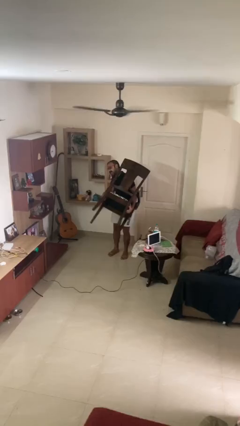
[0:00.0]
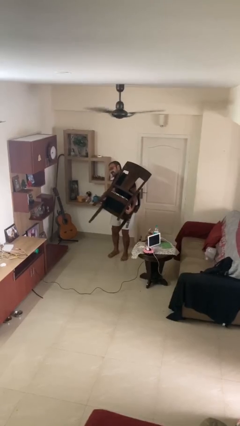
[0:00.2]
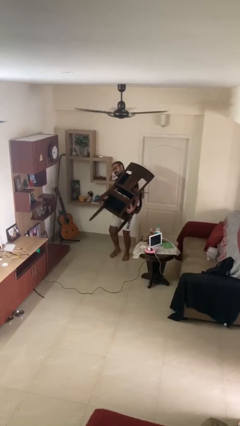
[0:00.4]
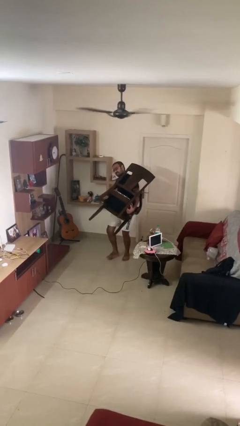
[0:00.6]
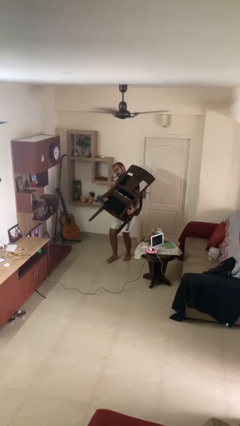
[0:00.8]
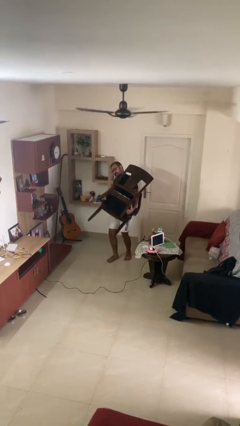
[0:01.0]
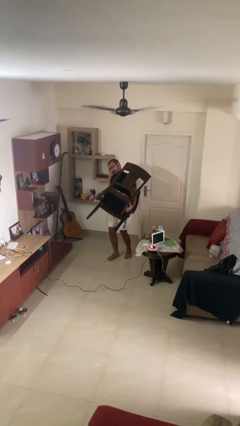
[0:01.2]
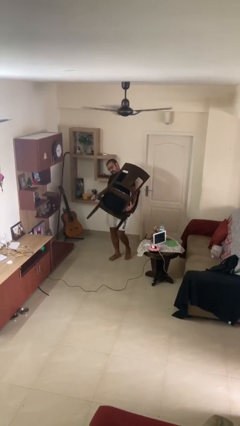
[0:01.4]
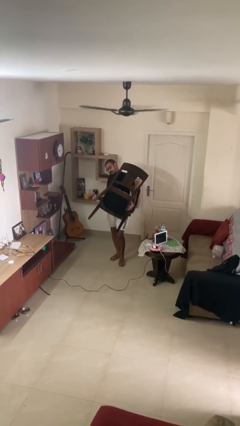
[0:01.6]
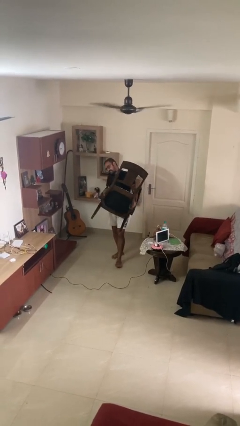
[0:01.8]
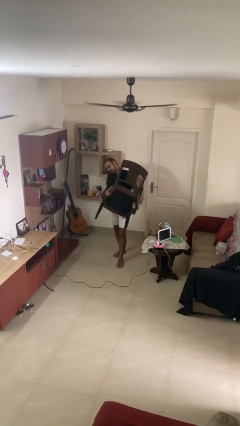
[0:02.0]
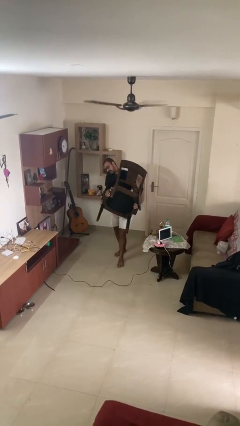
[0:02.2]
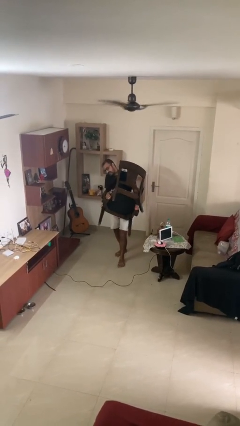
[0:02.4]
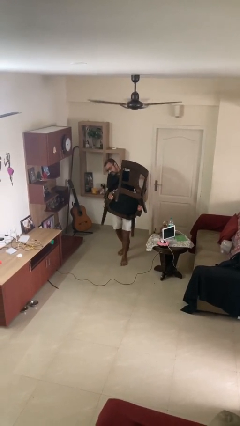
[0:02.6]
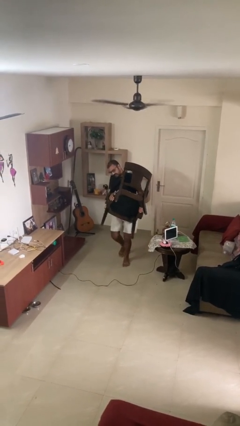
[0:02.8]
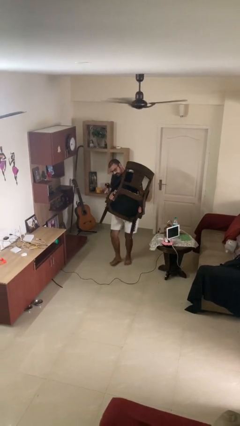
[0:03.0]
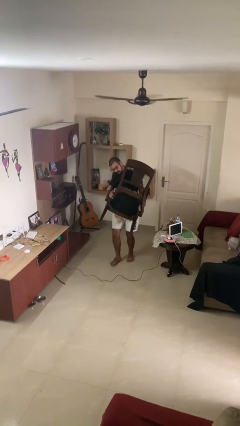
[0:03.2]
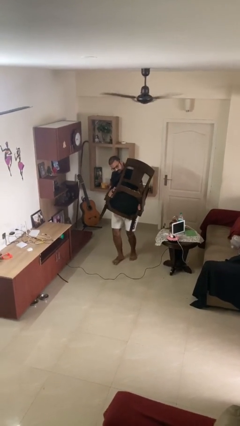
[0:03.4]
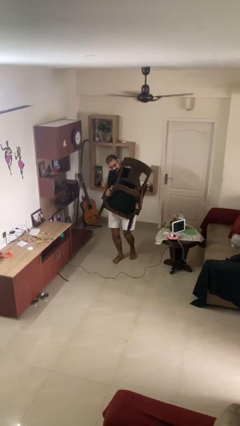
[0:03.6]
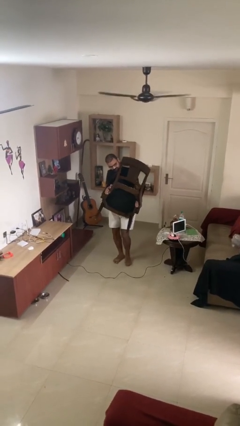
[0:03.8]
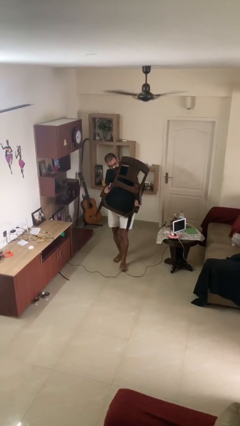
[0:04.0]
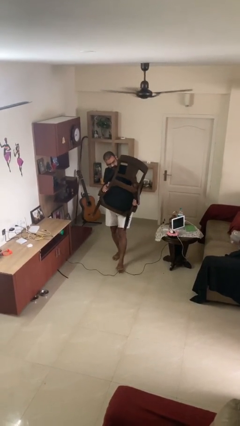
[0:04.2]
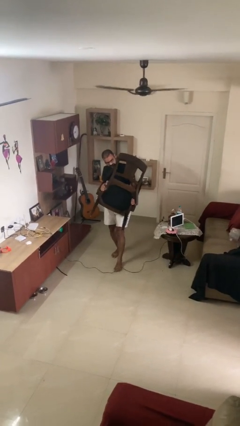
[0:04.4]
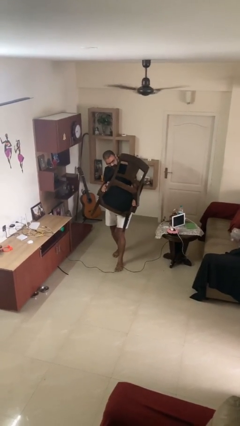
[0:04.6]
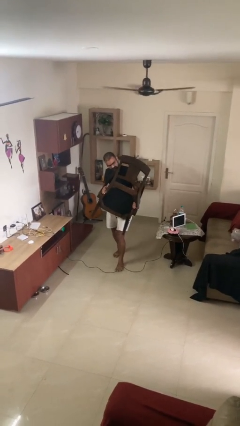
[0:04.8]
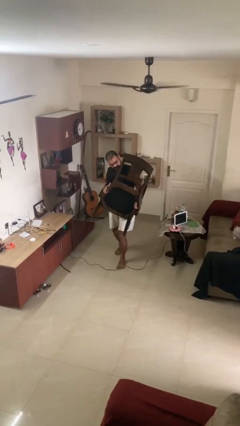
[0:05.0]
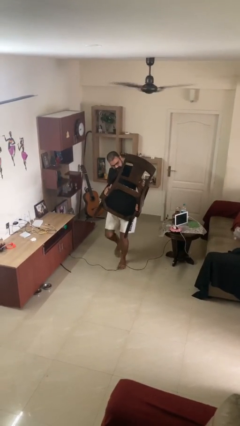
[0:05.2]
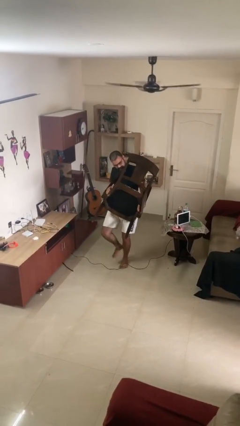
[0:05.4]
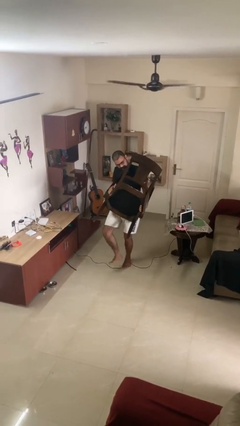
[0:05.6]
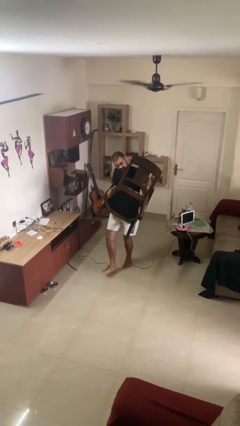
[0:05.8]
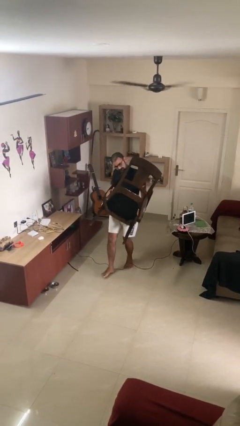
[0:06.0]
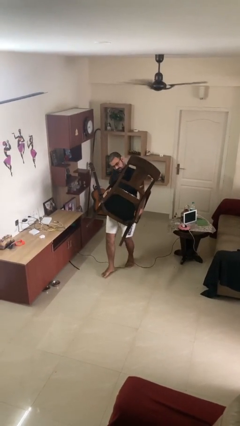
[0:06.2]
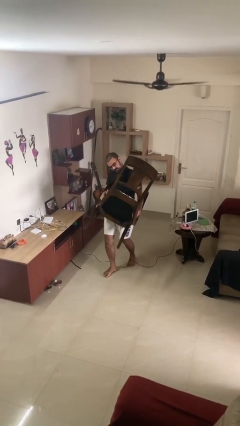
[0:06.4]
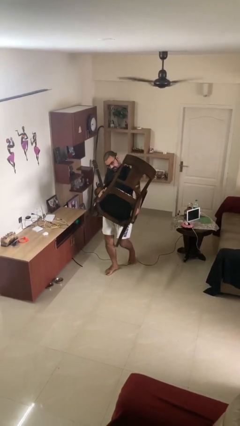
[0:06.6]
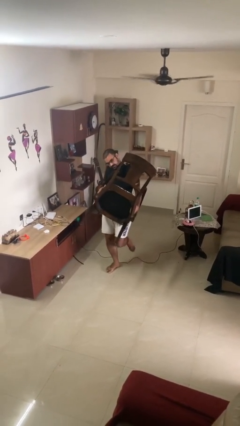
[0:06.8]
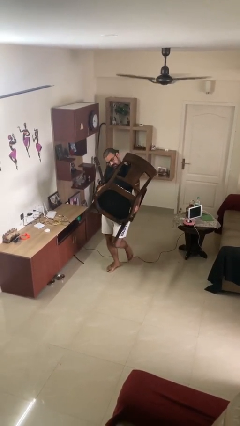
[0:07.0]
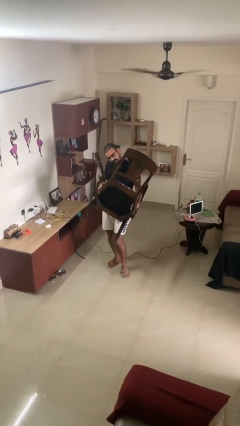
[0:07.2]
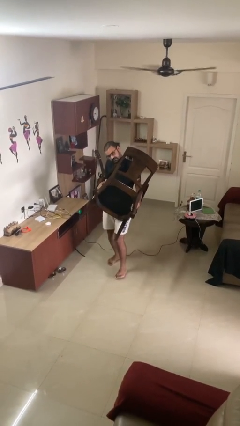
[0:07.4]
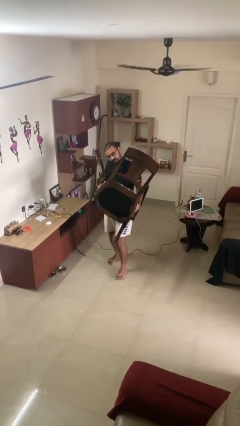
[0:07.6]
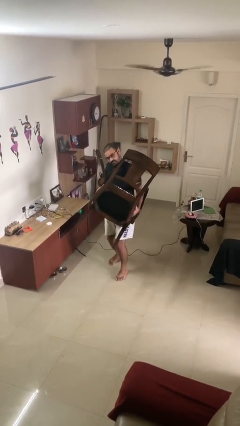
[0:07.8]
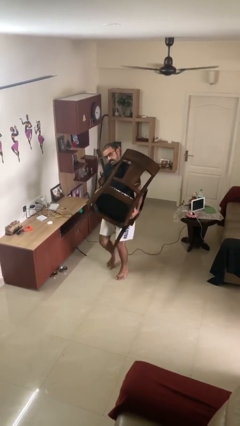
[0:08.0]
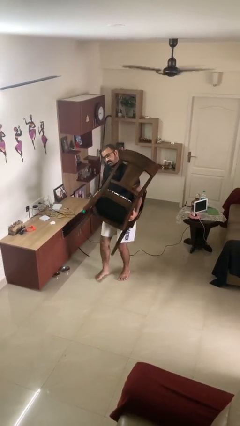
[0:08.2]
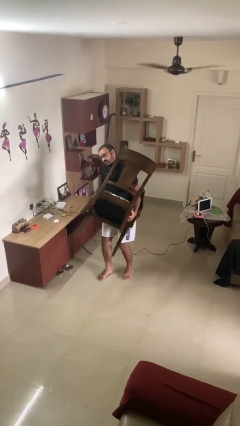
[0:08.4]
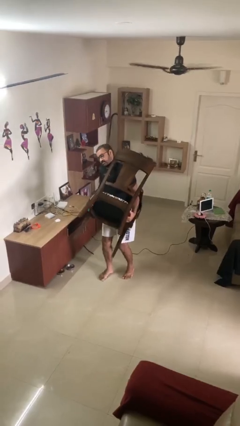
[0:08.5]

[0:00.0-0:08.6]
person carries heavy object

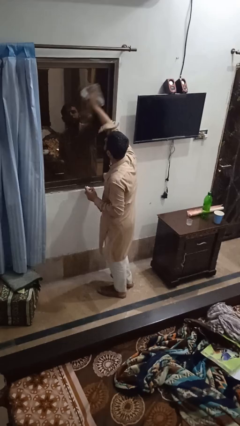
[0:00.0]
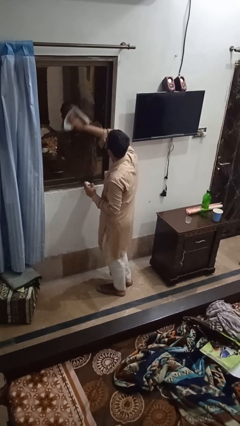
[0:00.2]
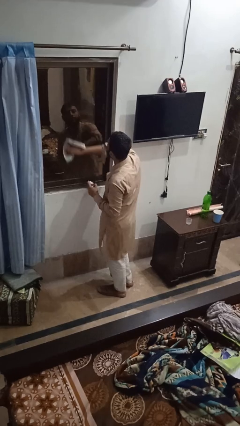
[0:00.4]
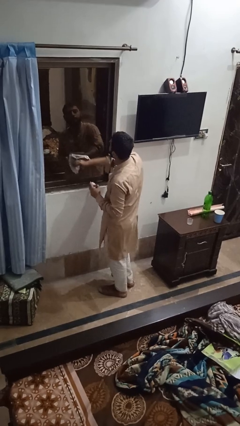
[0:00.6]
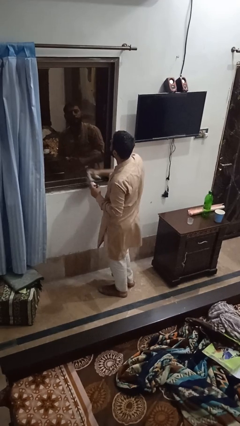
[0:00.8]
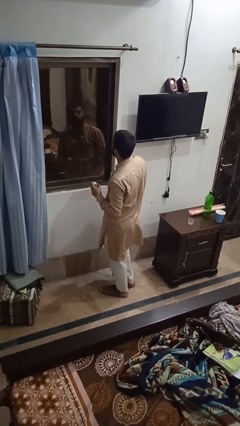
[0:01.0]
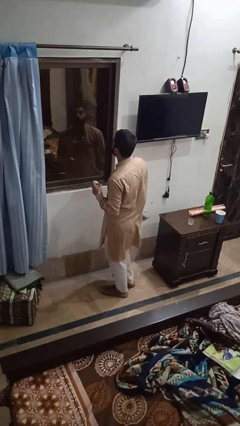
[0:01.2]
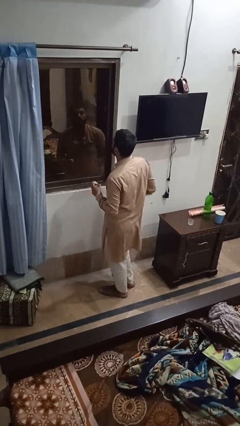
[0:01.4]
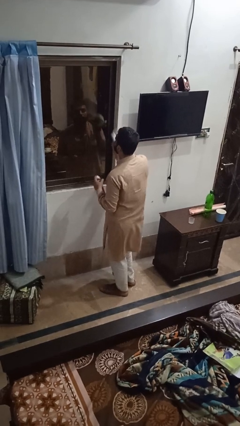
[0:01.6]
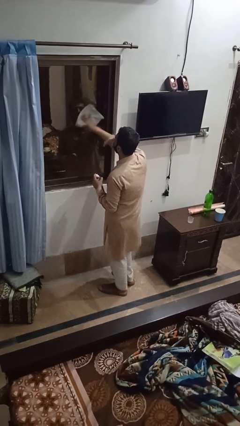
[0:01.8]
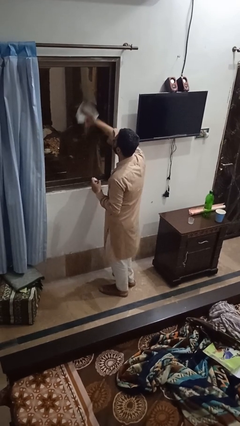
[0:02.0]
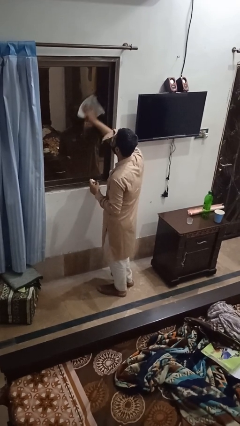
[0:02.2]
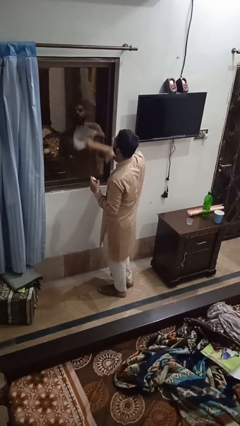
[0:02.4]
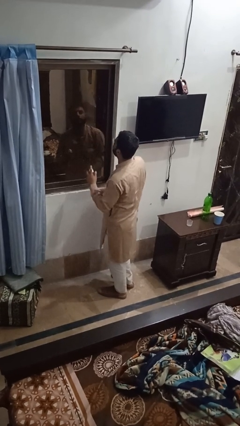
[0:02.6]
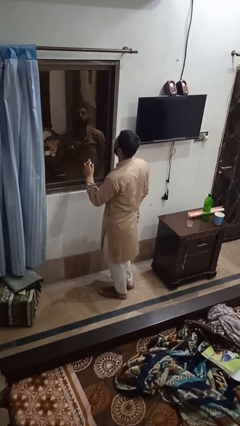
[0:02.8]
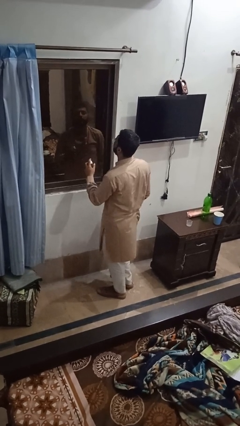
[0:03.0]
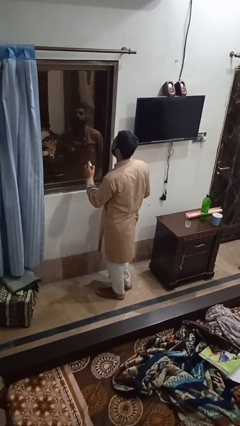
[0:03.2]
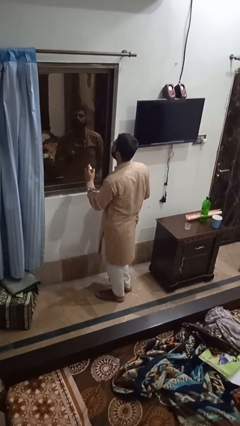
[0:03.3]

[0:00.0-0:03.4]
person washes window

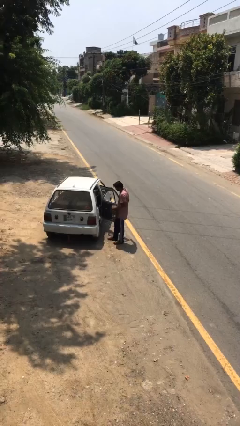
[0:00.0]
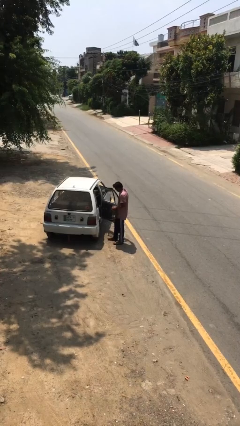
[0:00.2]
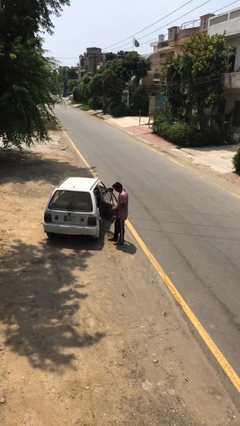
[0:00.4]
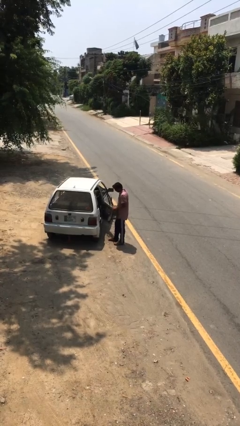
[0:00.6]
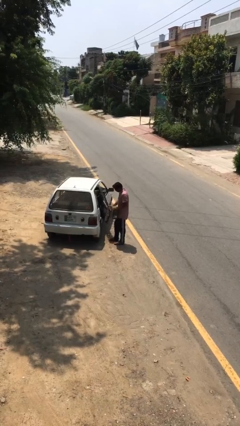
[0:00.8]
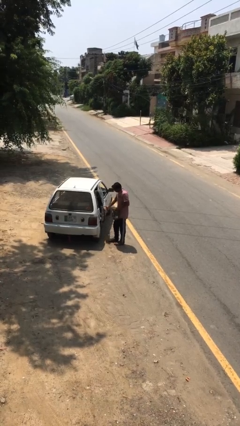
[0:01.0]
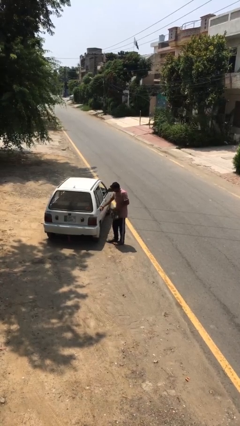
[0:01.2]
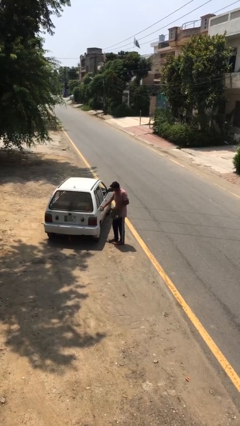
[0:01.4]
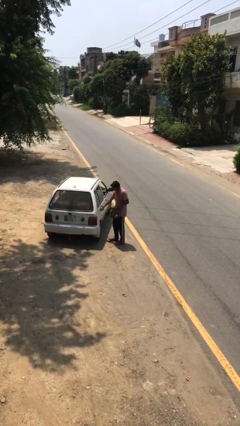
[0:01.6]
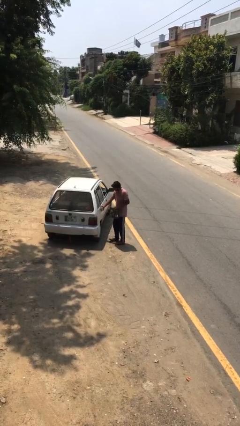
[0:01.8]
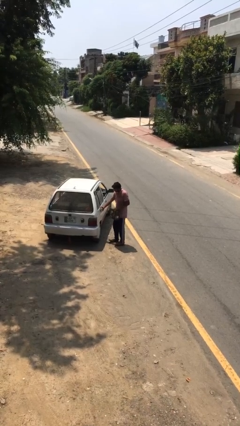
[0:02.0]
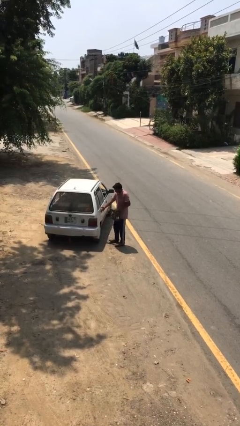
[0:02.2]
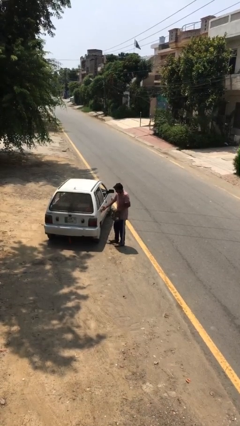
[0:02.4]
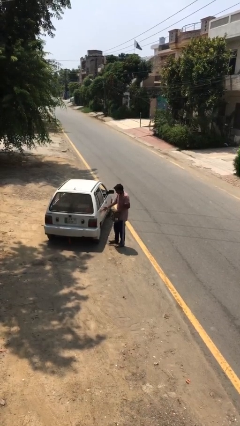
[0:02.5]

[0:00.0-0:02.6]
person closes car door

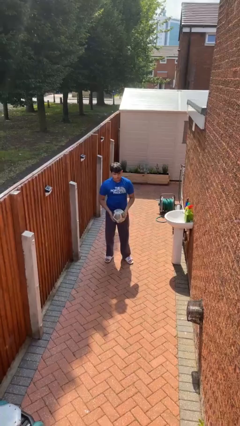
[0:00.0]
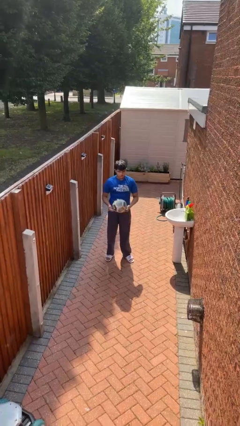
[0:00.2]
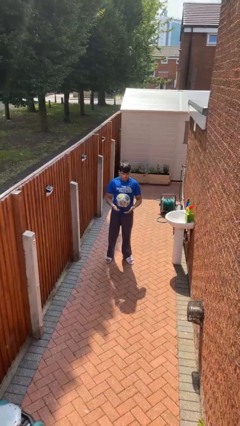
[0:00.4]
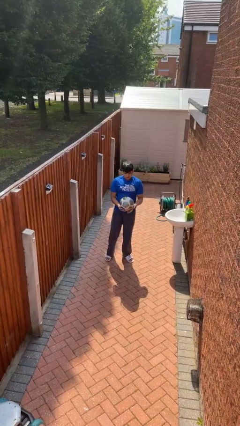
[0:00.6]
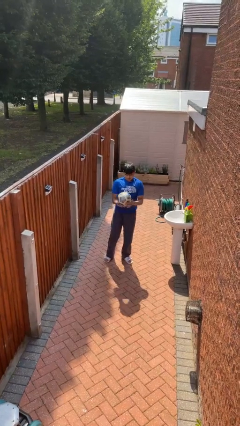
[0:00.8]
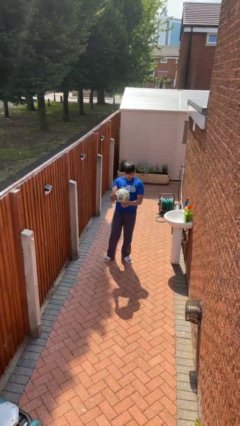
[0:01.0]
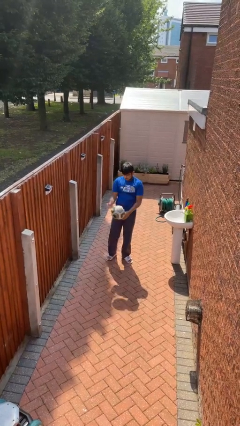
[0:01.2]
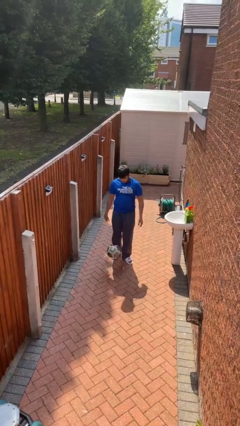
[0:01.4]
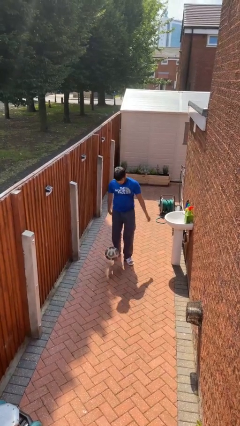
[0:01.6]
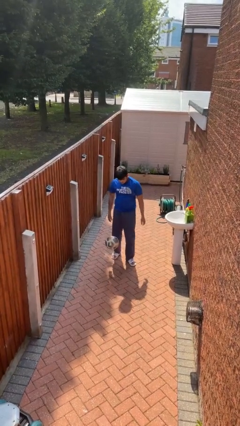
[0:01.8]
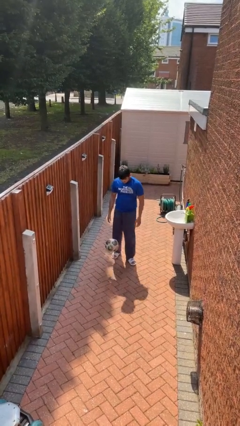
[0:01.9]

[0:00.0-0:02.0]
person drops object

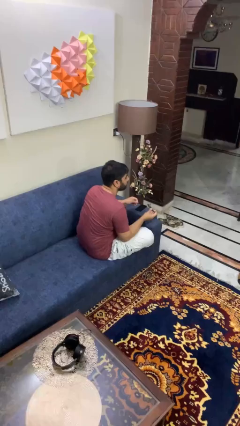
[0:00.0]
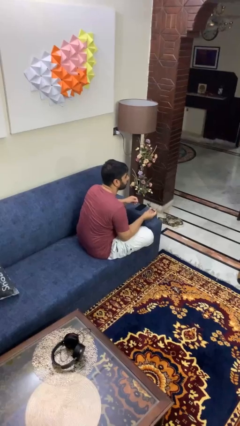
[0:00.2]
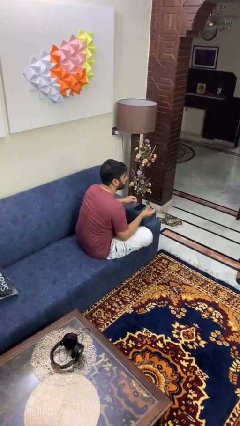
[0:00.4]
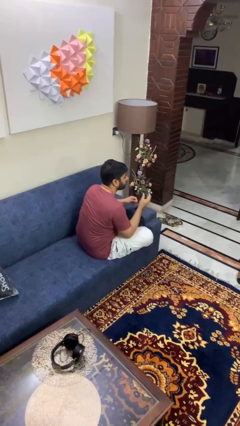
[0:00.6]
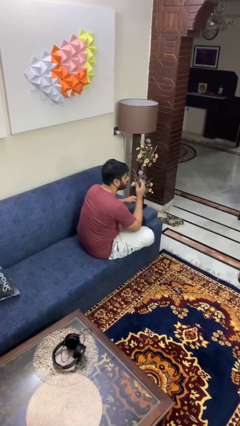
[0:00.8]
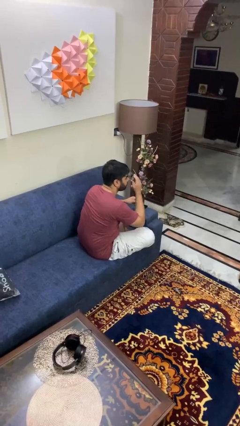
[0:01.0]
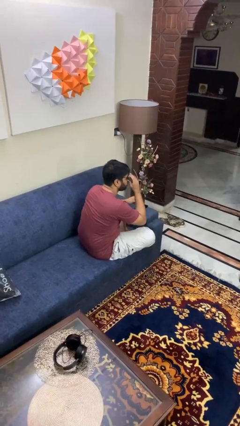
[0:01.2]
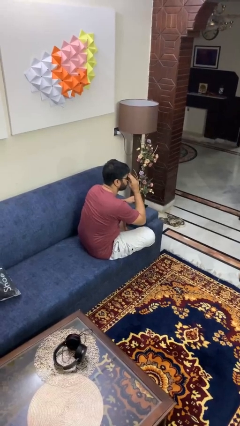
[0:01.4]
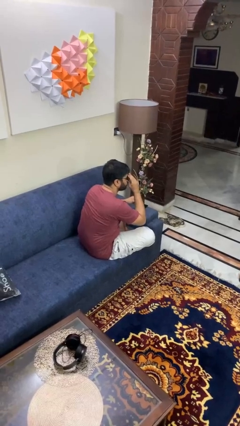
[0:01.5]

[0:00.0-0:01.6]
person puts on glasses
